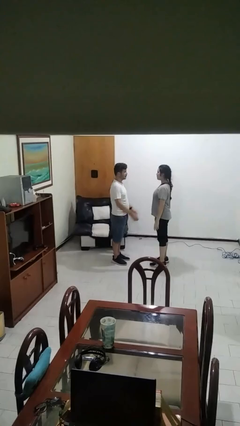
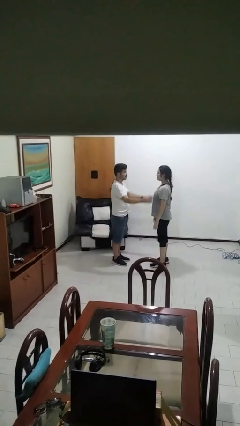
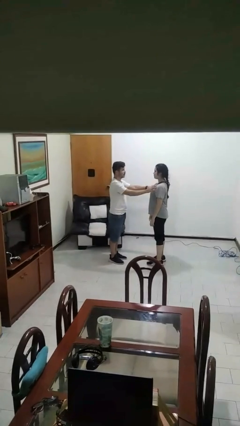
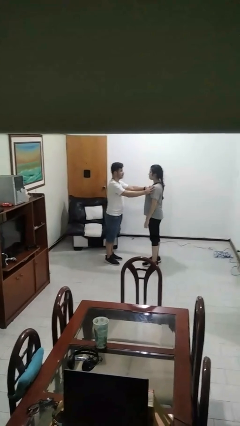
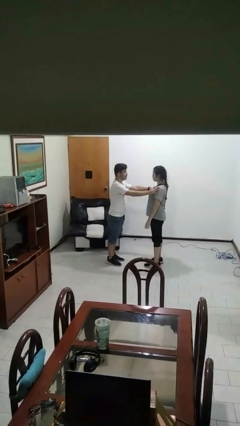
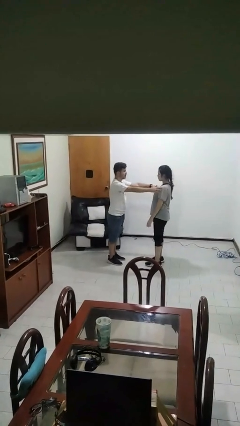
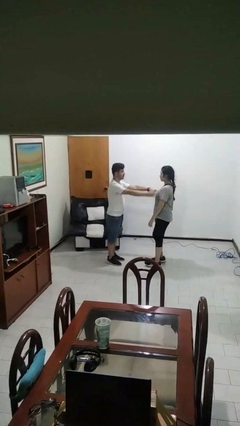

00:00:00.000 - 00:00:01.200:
person shoves person

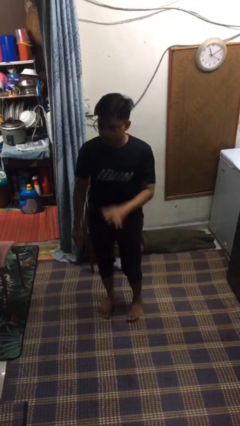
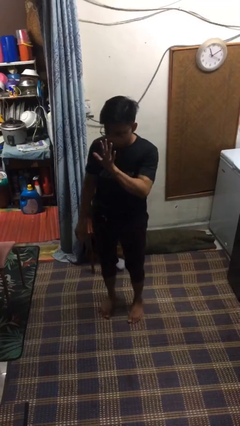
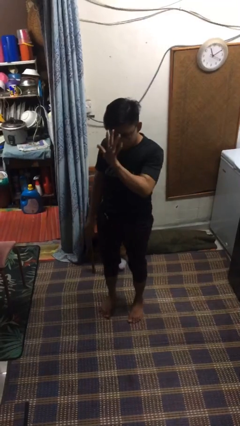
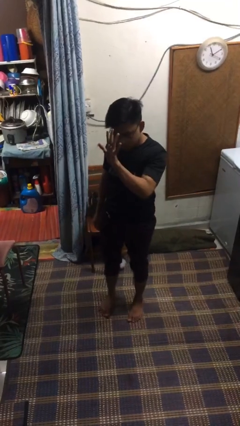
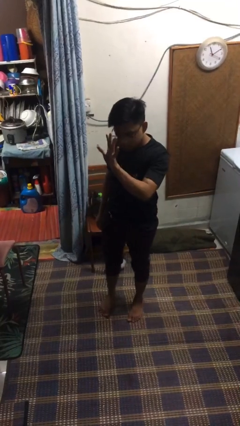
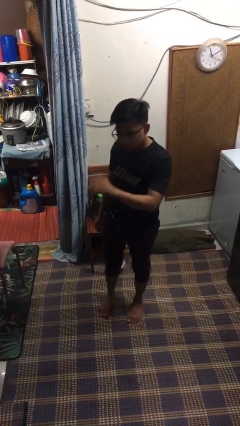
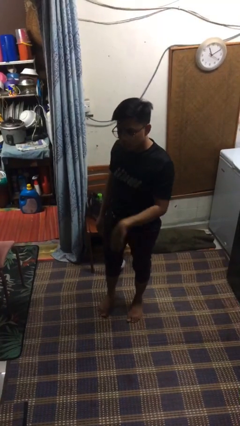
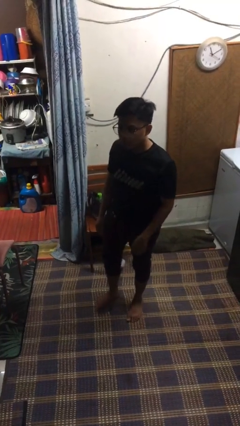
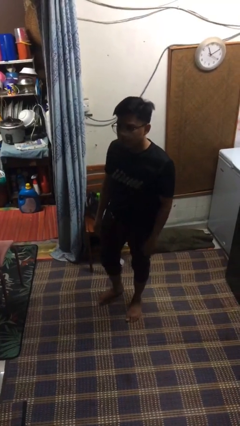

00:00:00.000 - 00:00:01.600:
person gestures stop

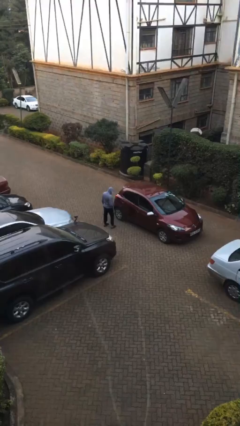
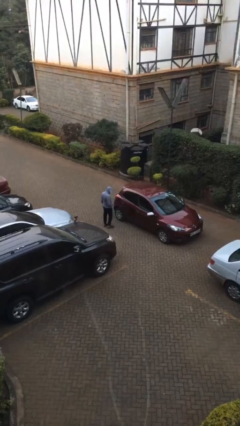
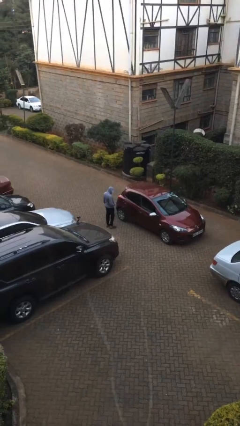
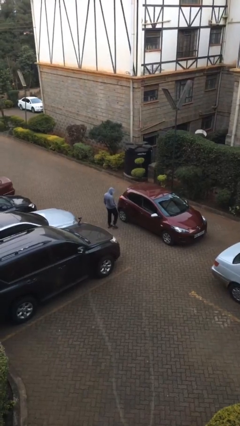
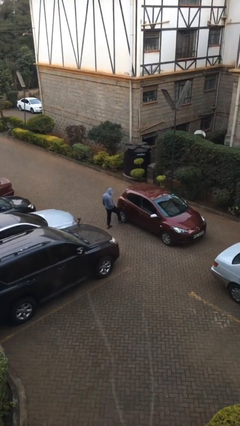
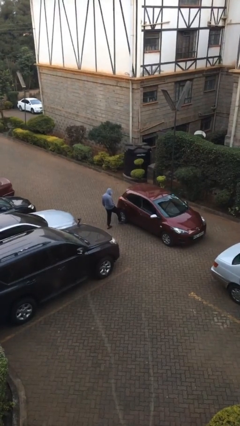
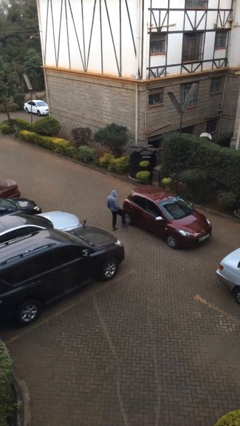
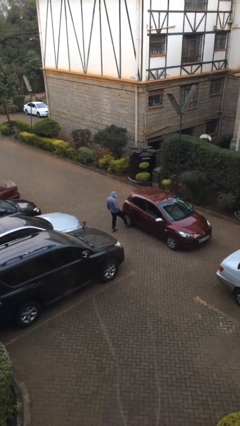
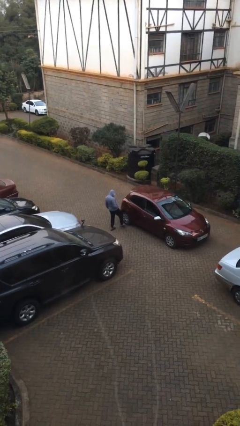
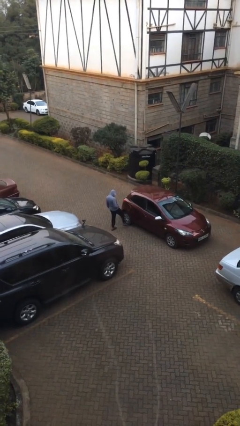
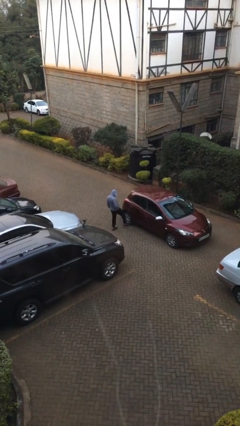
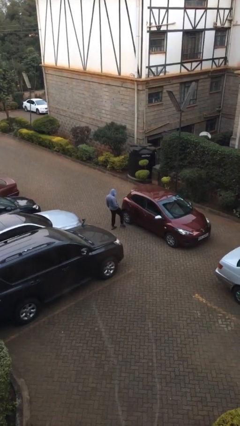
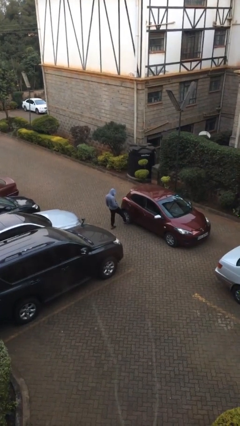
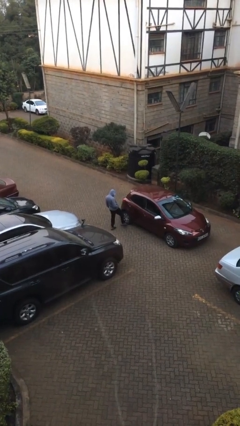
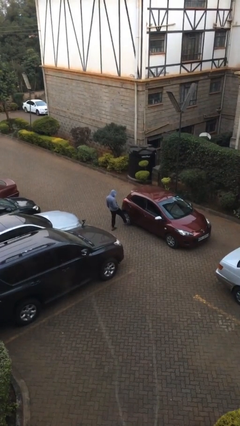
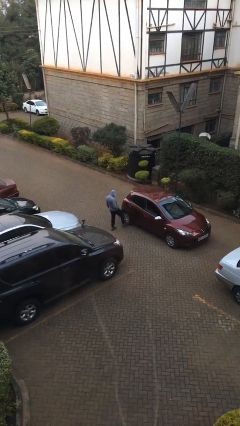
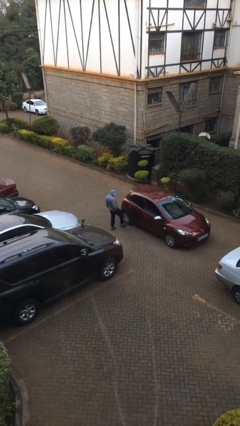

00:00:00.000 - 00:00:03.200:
person kicks car tires

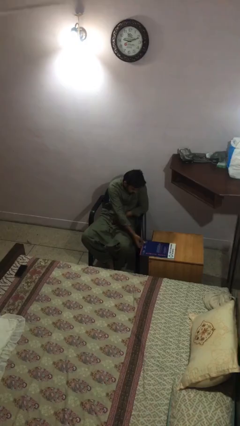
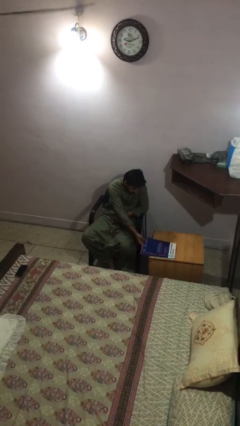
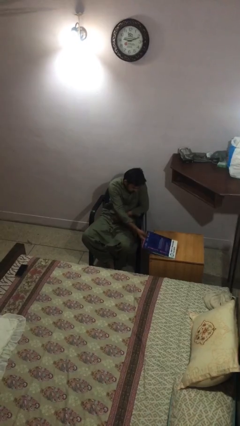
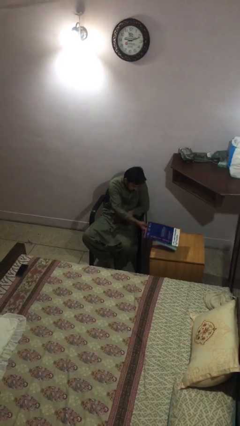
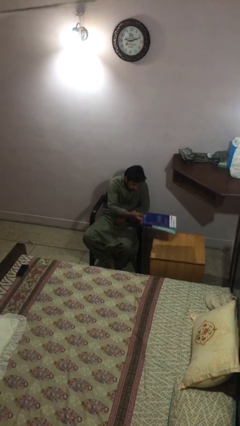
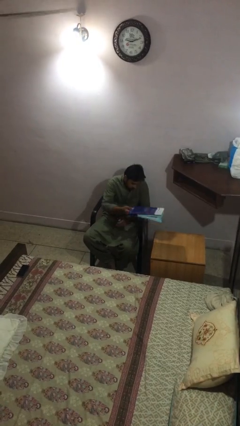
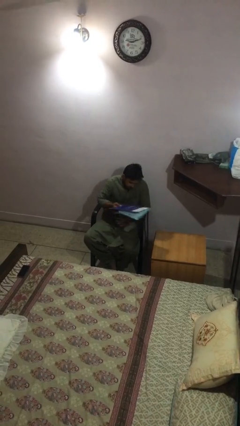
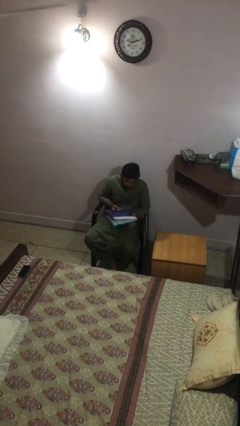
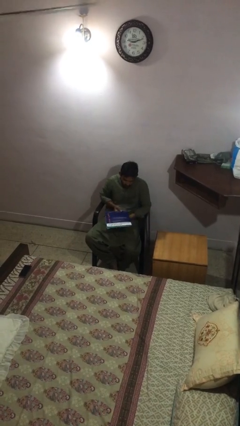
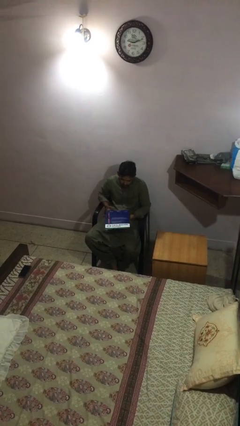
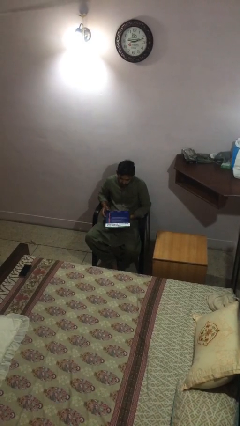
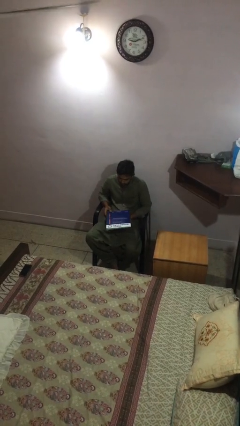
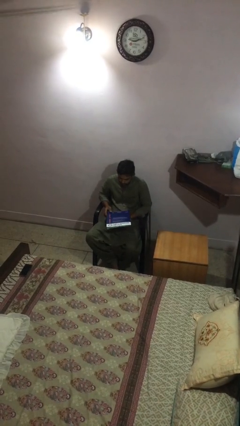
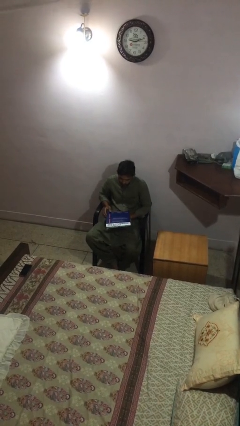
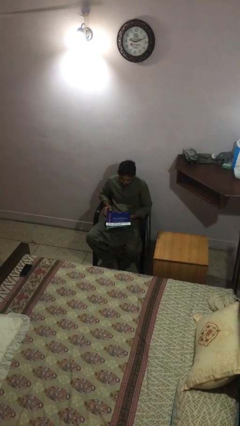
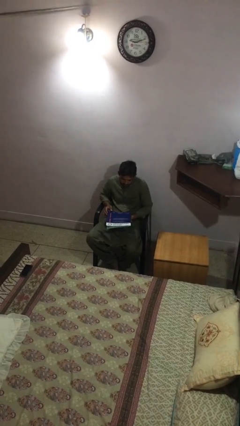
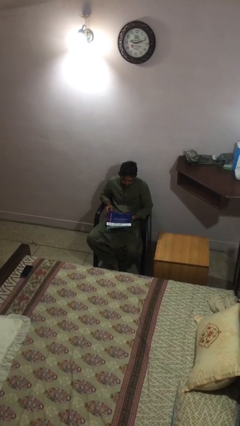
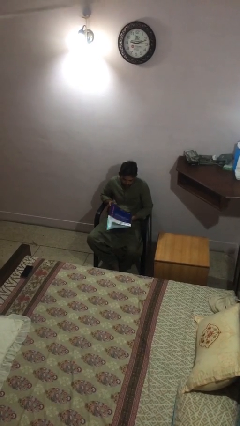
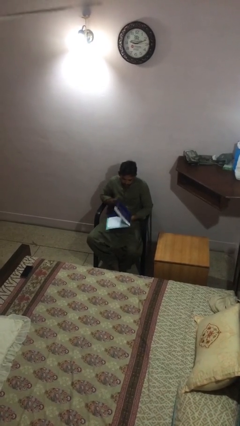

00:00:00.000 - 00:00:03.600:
person picks up object from table

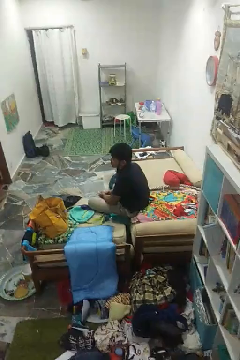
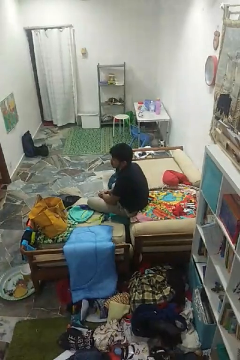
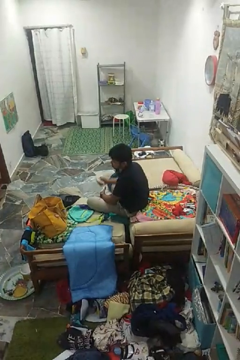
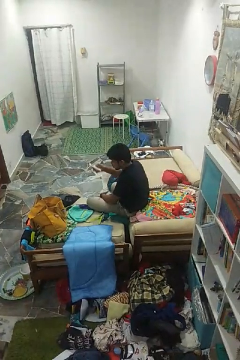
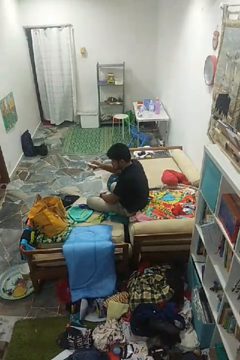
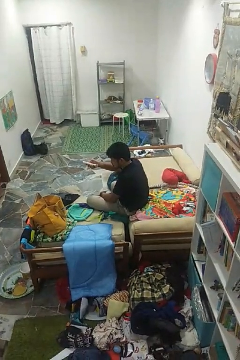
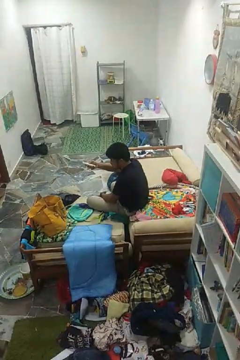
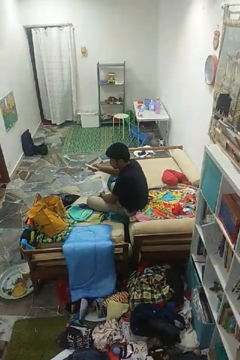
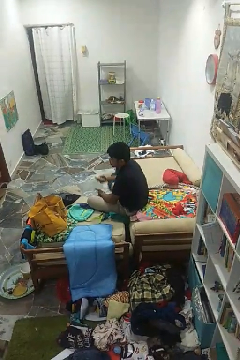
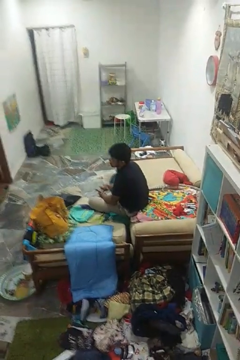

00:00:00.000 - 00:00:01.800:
person uses television remote

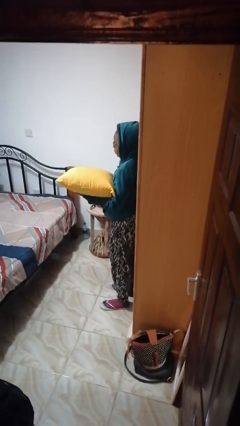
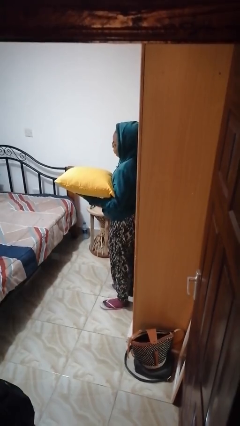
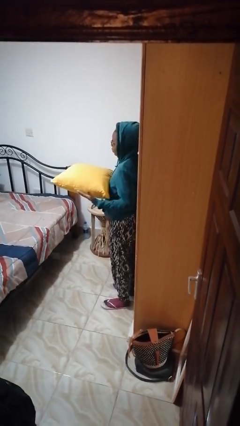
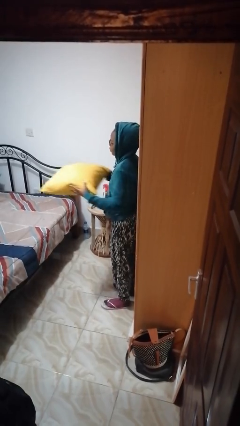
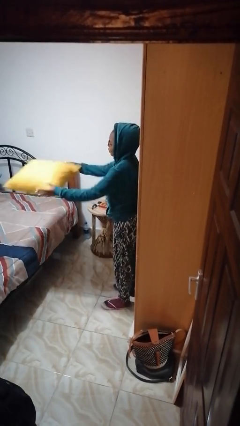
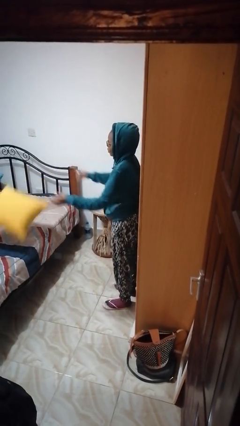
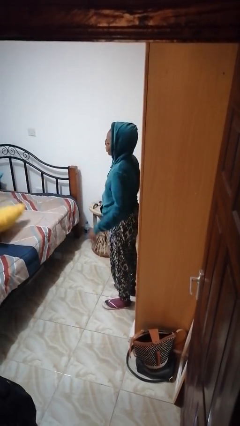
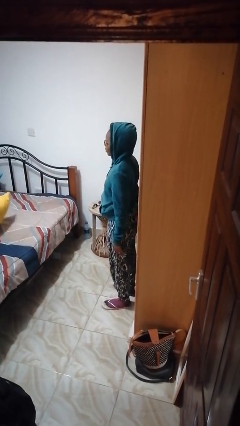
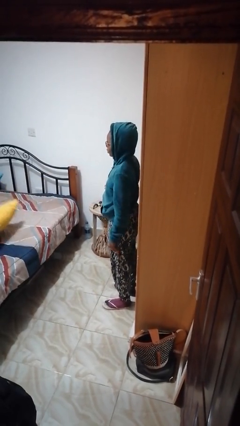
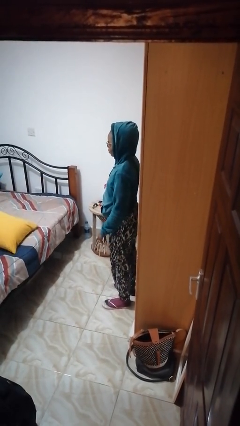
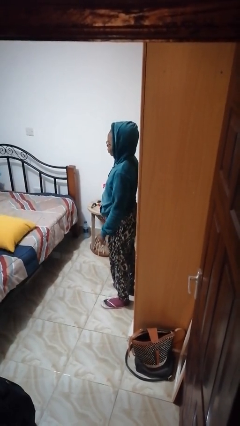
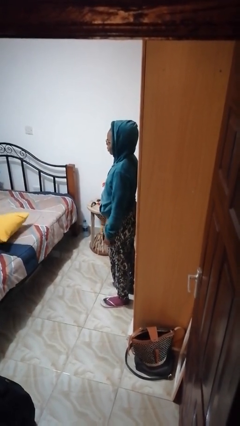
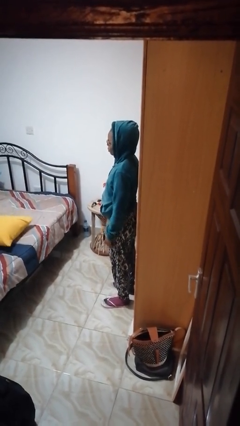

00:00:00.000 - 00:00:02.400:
person throws object on bed

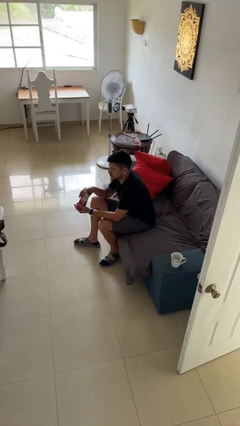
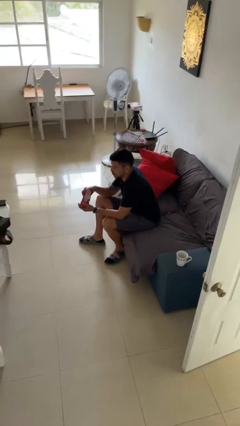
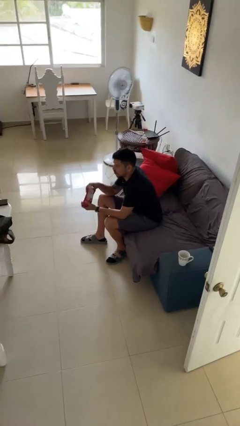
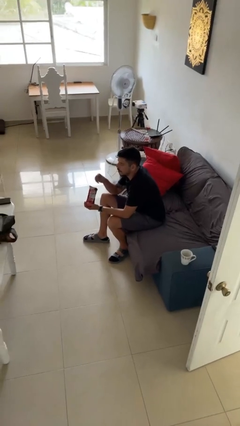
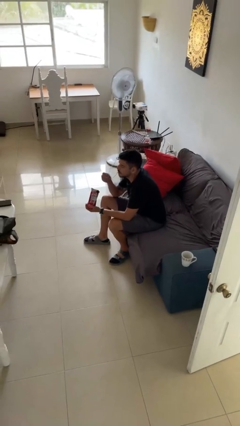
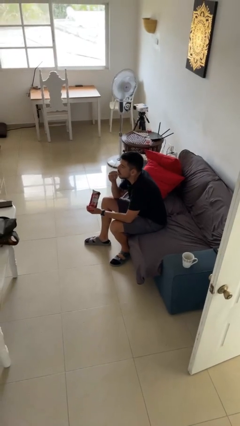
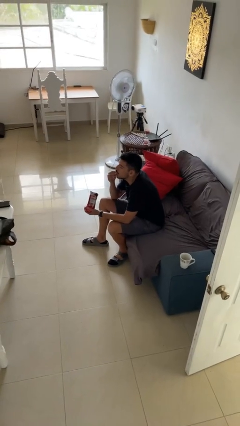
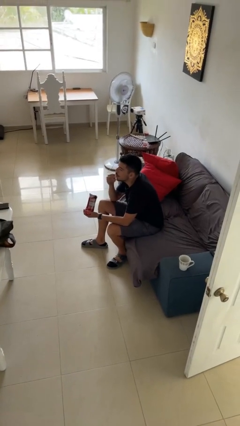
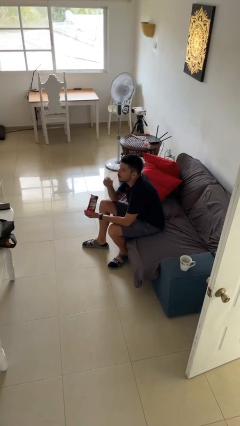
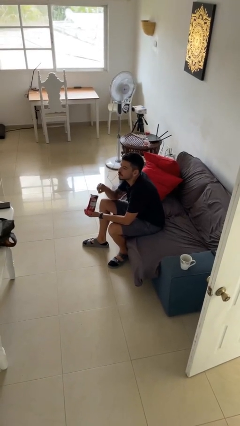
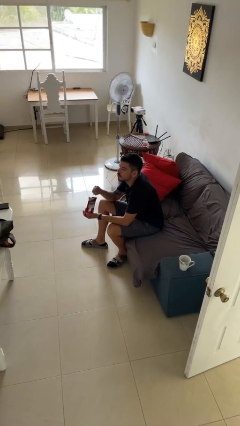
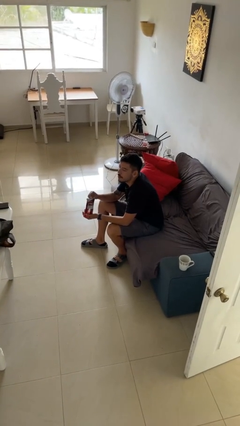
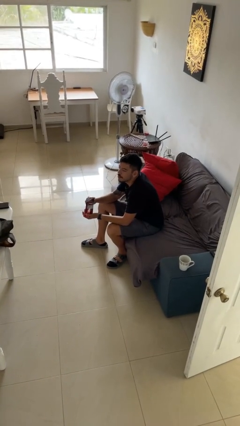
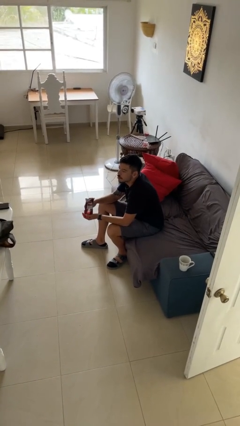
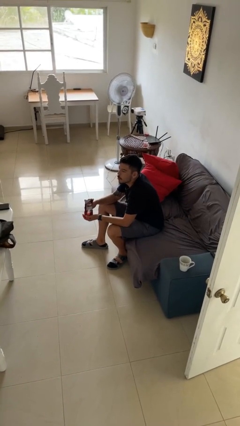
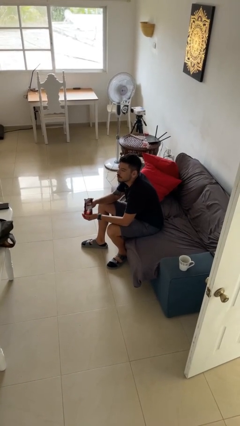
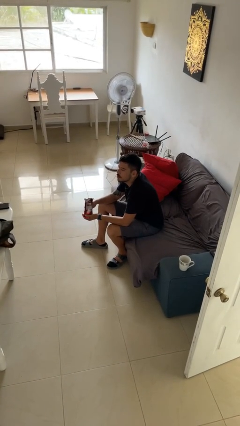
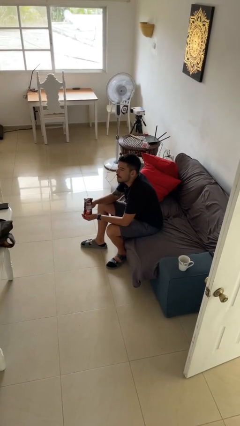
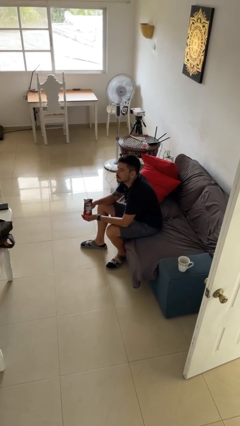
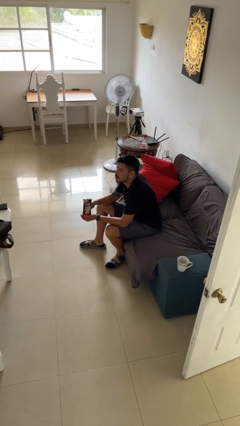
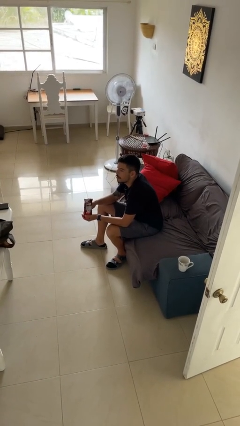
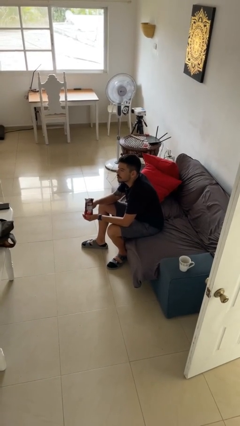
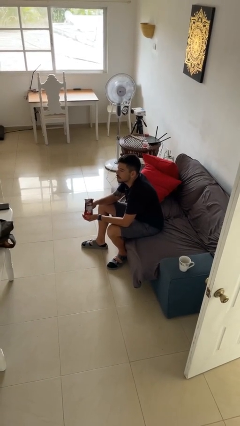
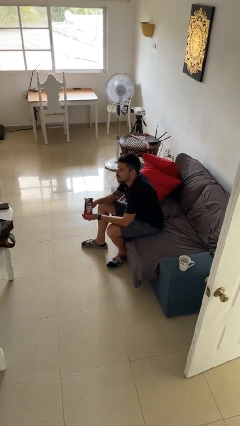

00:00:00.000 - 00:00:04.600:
person eats snack from bag
